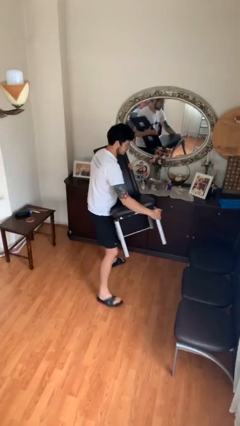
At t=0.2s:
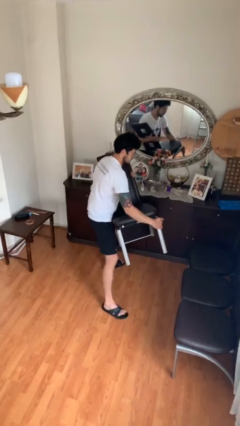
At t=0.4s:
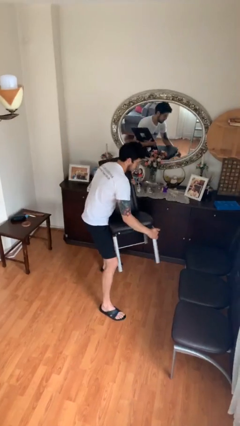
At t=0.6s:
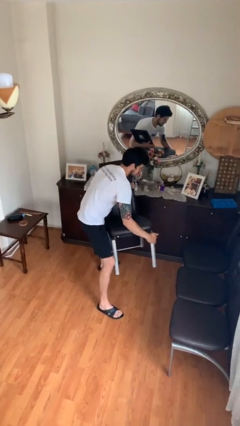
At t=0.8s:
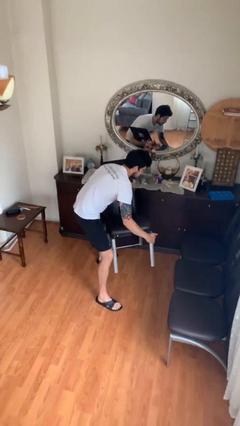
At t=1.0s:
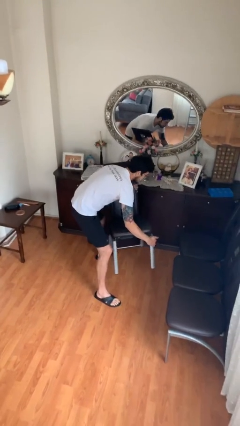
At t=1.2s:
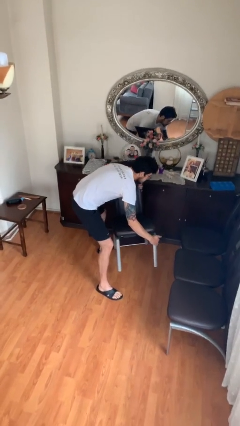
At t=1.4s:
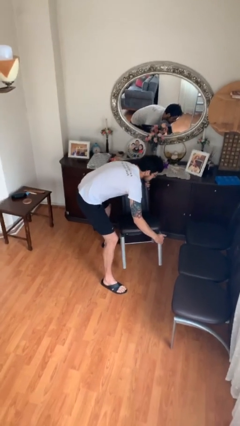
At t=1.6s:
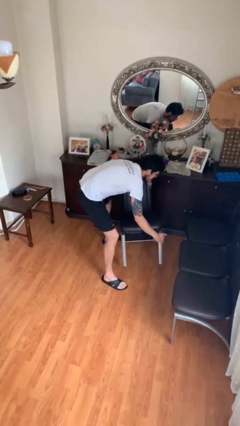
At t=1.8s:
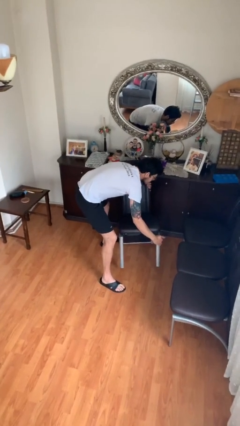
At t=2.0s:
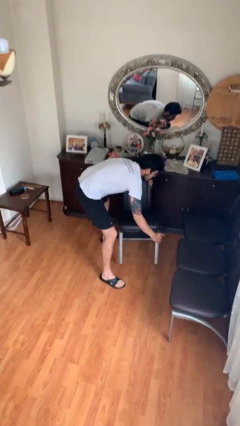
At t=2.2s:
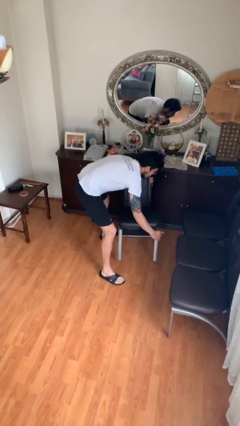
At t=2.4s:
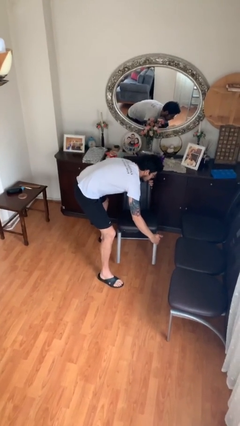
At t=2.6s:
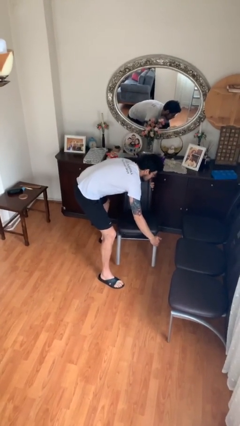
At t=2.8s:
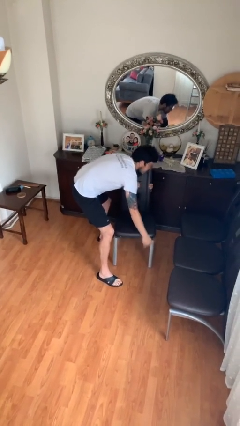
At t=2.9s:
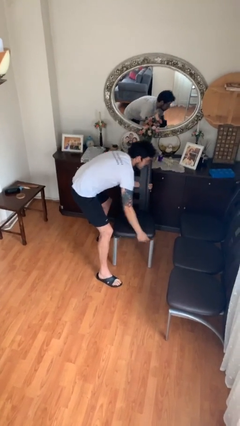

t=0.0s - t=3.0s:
person puts down object on floor

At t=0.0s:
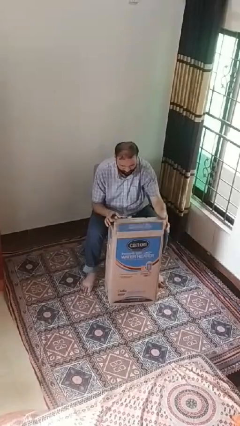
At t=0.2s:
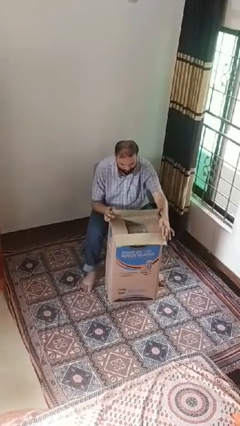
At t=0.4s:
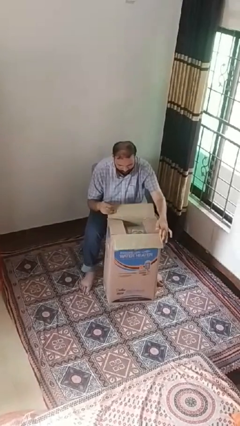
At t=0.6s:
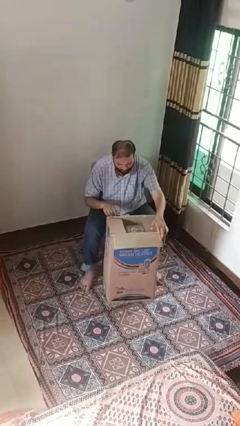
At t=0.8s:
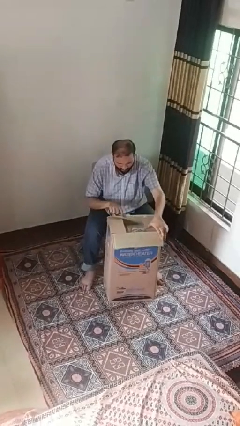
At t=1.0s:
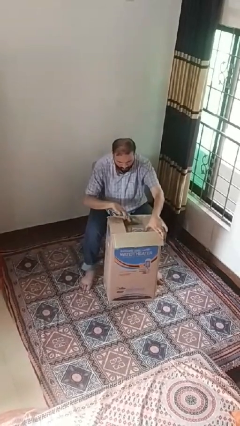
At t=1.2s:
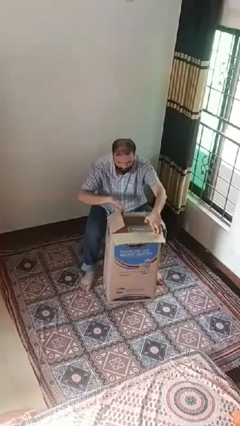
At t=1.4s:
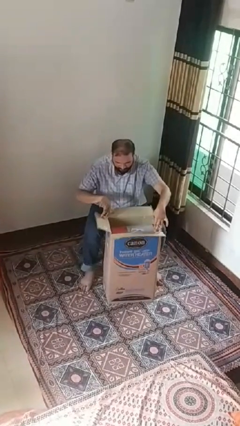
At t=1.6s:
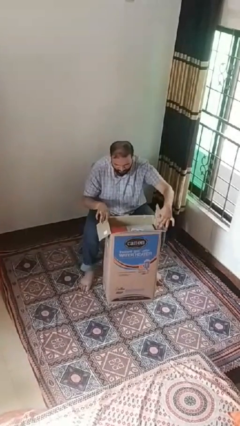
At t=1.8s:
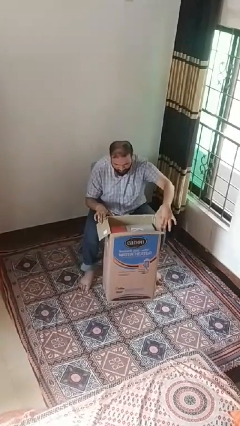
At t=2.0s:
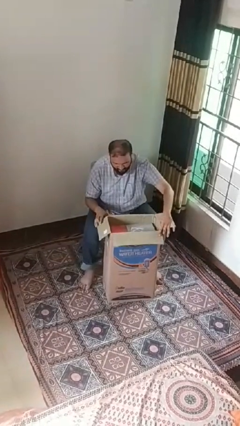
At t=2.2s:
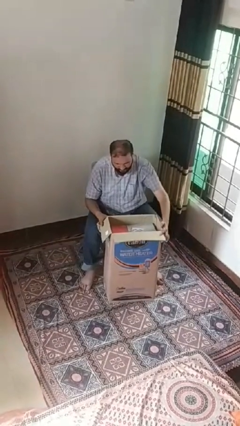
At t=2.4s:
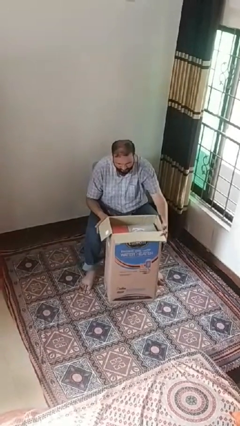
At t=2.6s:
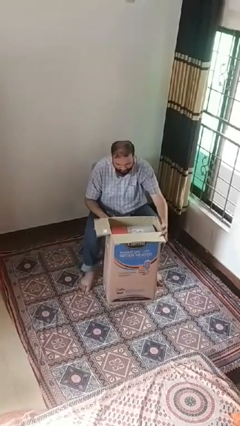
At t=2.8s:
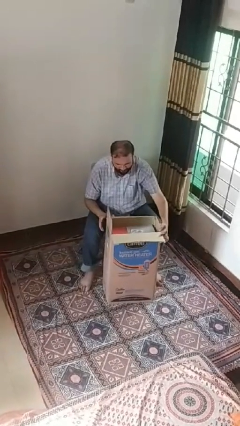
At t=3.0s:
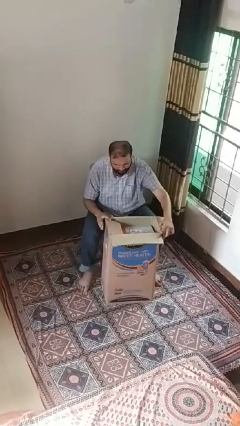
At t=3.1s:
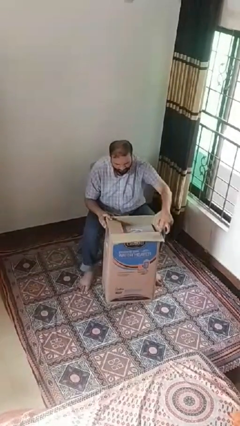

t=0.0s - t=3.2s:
person opens box

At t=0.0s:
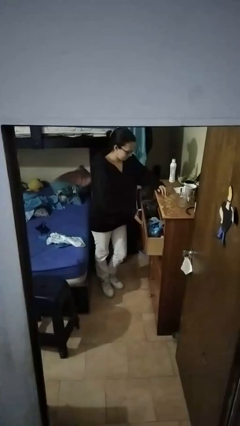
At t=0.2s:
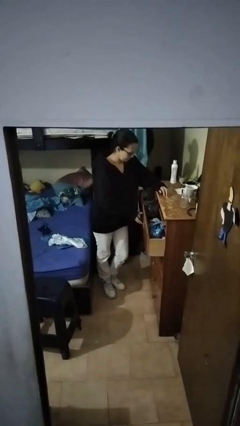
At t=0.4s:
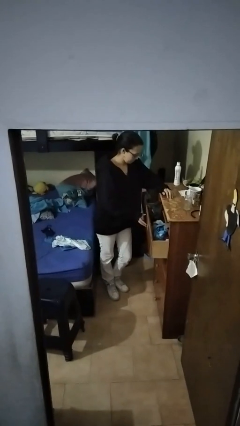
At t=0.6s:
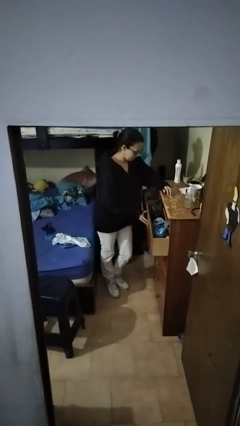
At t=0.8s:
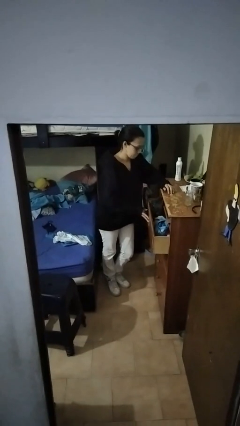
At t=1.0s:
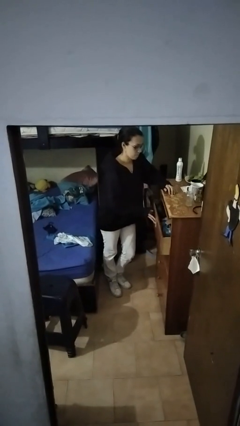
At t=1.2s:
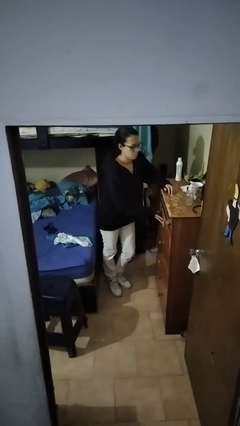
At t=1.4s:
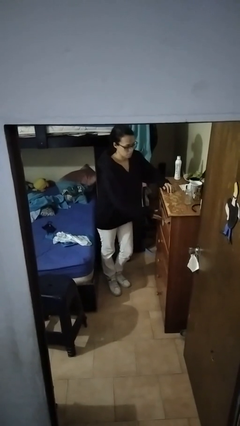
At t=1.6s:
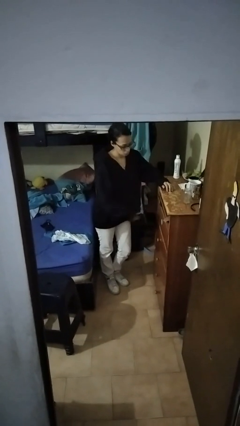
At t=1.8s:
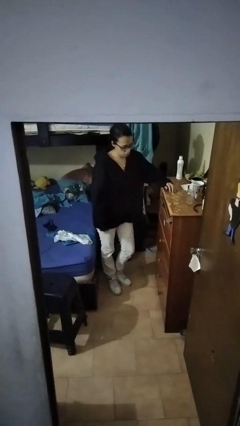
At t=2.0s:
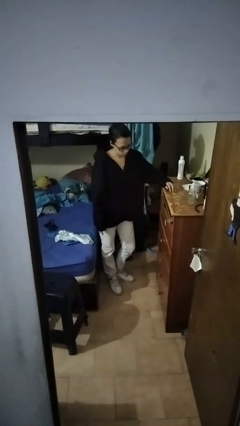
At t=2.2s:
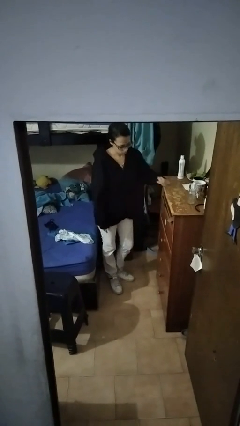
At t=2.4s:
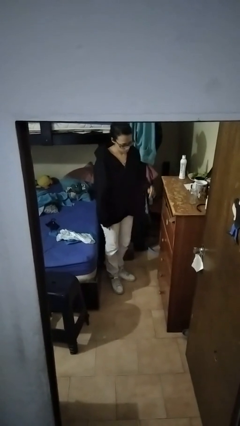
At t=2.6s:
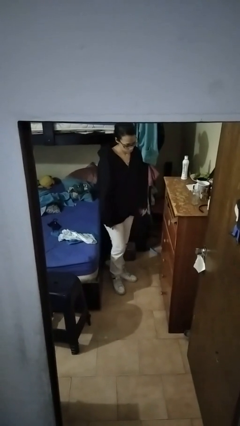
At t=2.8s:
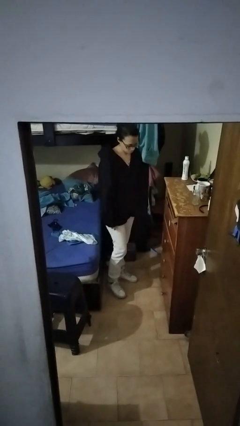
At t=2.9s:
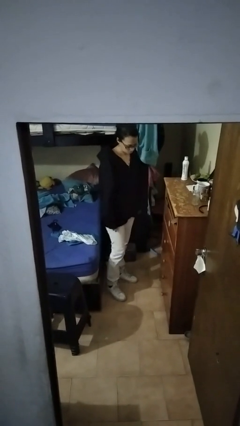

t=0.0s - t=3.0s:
person closes dresser drawer

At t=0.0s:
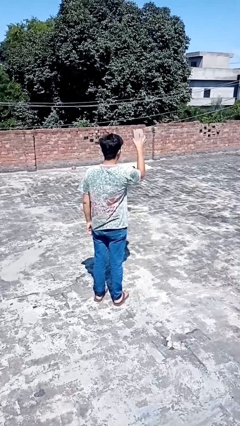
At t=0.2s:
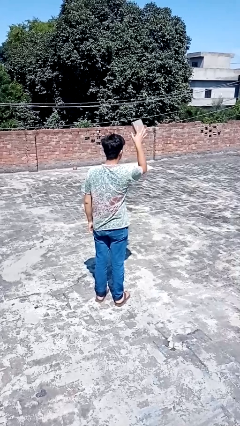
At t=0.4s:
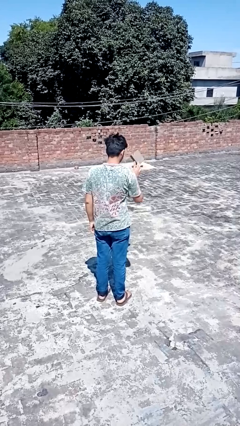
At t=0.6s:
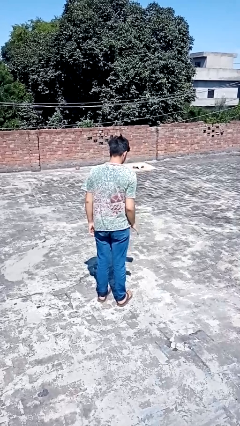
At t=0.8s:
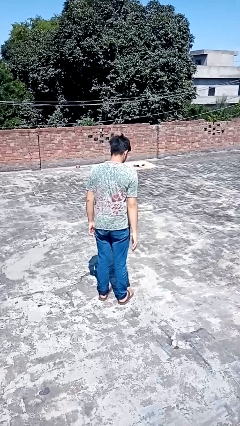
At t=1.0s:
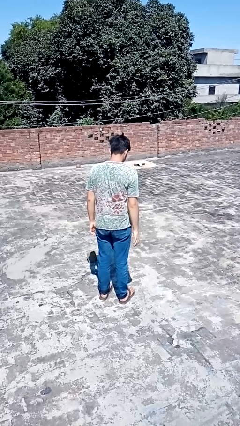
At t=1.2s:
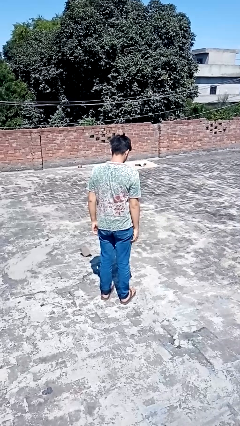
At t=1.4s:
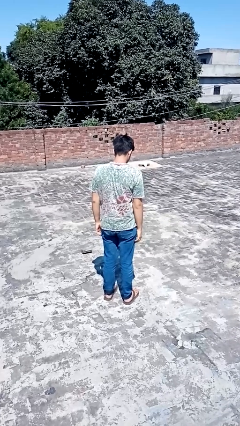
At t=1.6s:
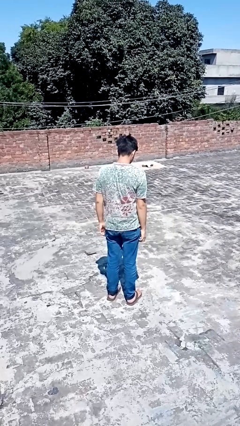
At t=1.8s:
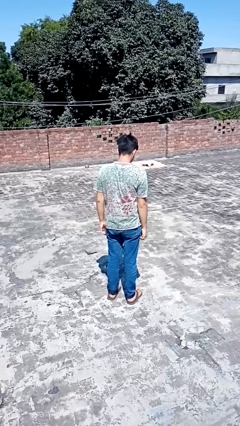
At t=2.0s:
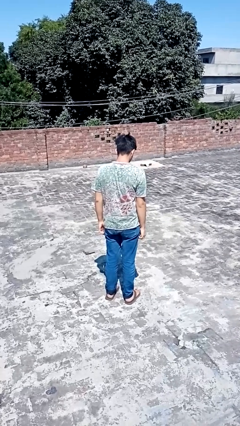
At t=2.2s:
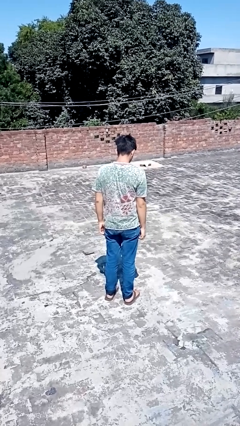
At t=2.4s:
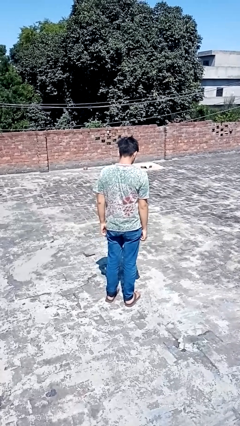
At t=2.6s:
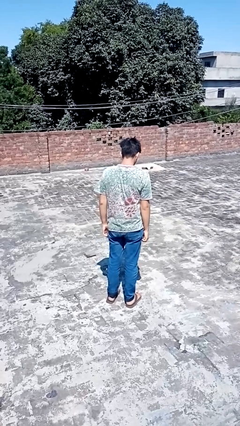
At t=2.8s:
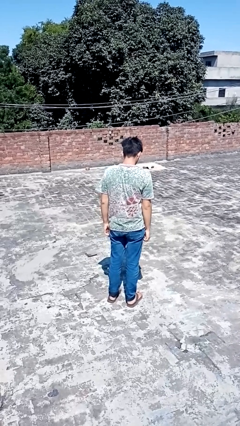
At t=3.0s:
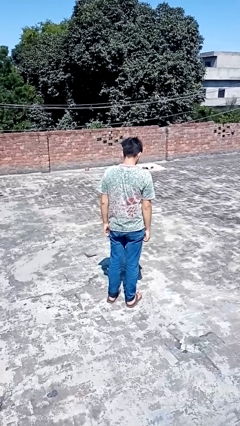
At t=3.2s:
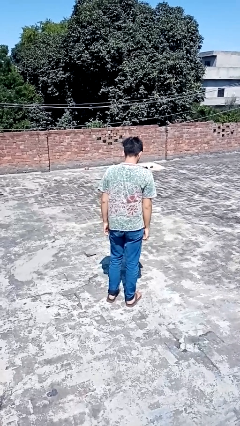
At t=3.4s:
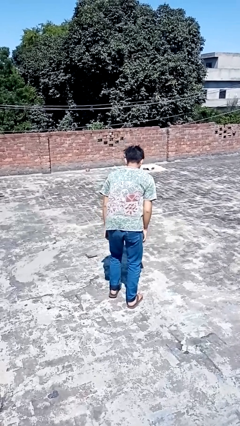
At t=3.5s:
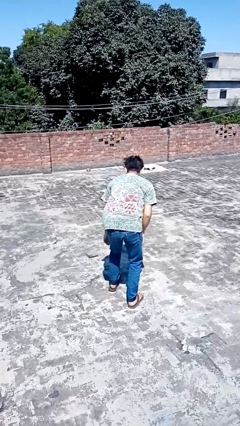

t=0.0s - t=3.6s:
person throws object into air

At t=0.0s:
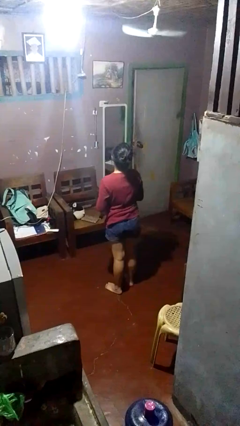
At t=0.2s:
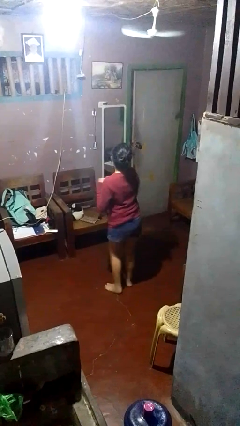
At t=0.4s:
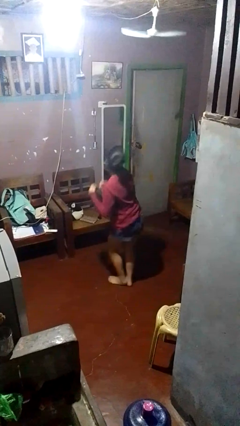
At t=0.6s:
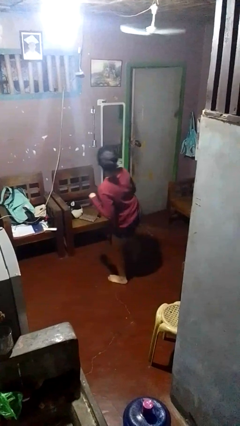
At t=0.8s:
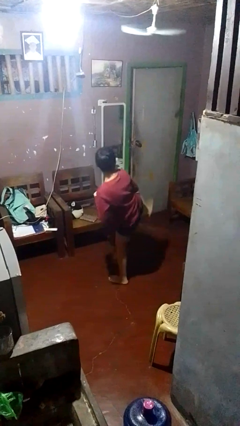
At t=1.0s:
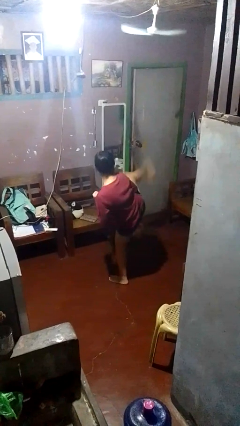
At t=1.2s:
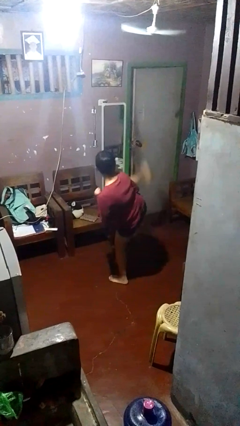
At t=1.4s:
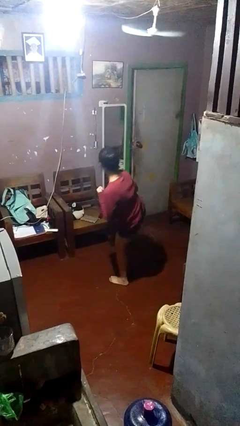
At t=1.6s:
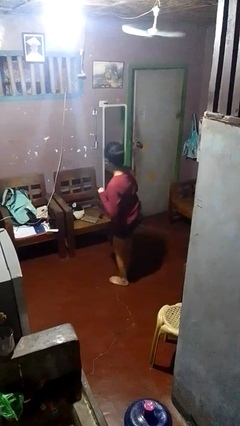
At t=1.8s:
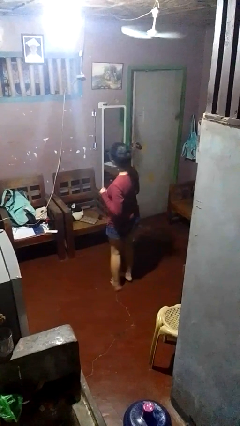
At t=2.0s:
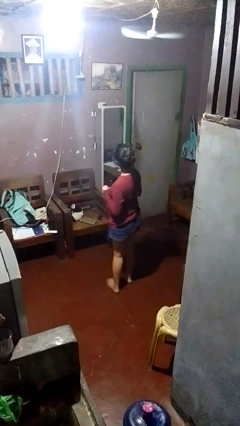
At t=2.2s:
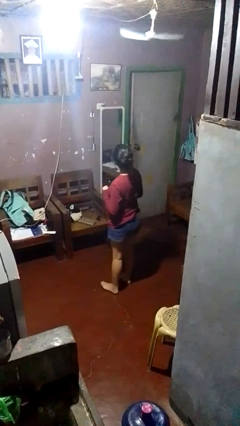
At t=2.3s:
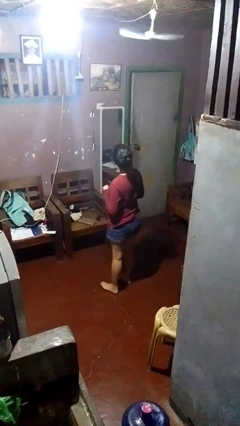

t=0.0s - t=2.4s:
person karate kicks

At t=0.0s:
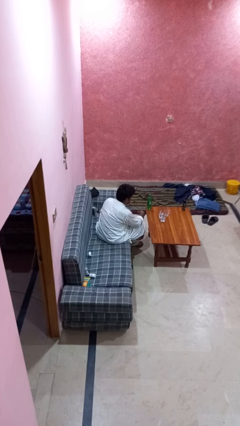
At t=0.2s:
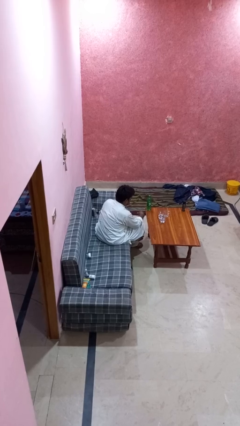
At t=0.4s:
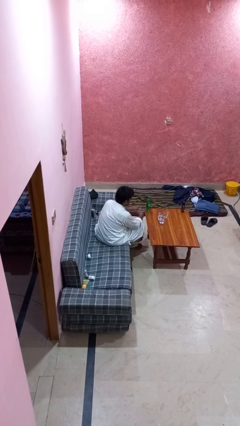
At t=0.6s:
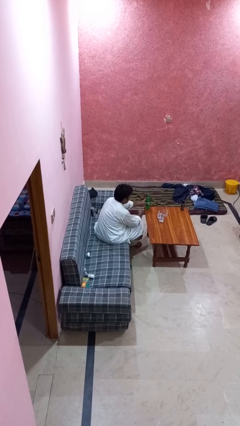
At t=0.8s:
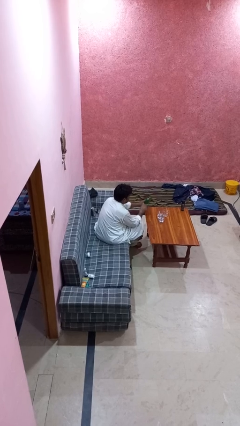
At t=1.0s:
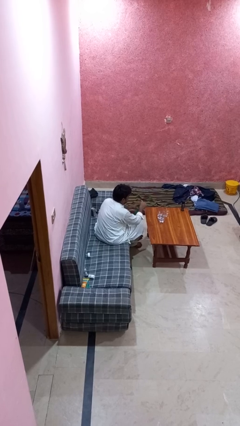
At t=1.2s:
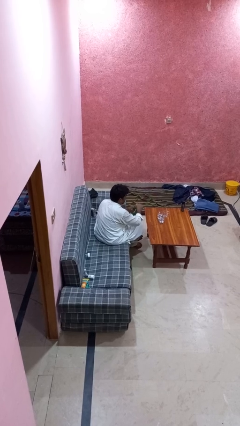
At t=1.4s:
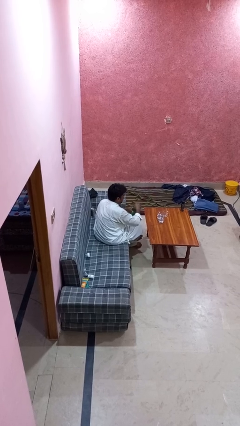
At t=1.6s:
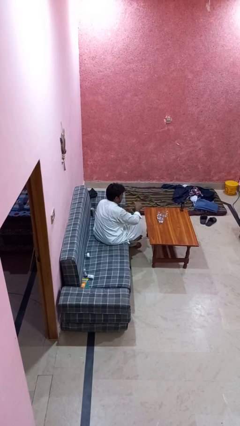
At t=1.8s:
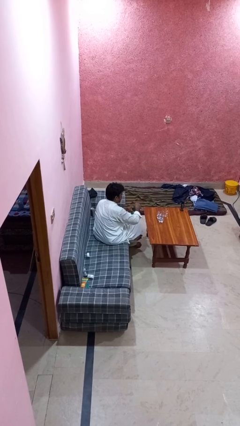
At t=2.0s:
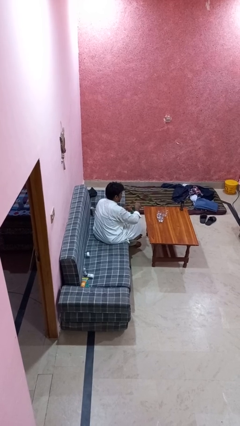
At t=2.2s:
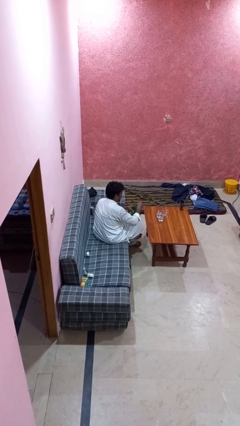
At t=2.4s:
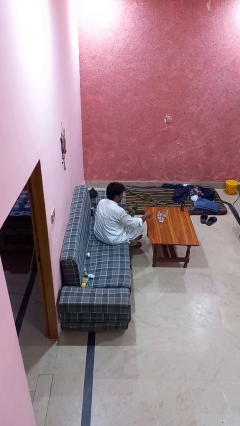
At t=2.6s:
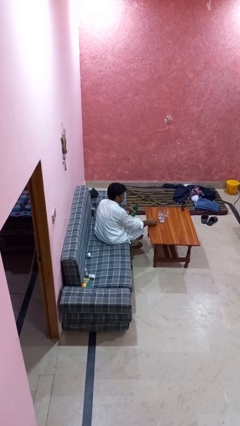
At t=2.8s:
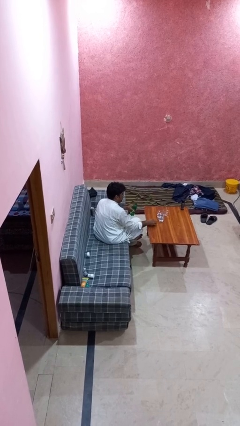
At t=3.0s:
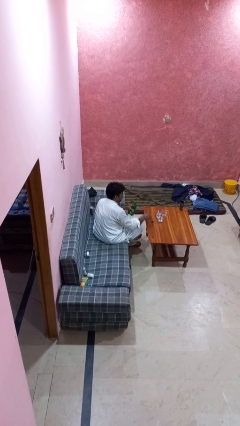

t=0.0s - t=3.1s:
person unscrews lid from bottle
